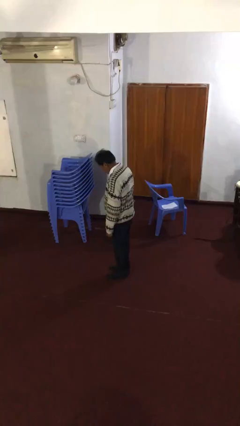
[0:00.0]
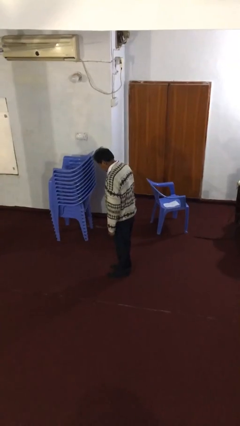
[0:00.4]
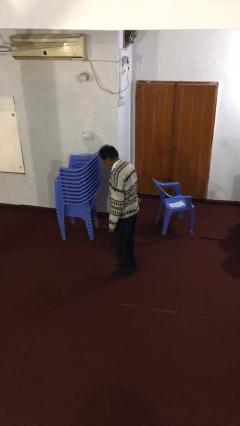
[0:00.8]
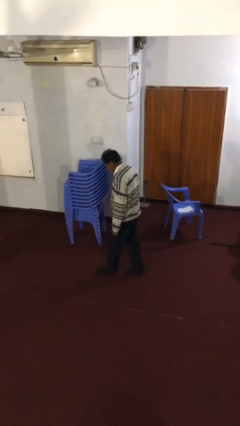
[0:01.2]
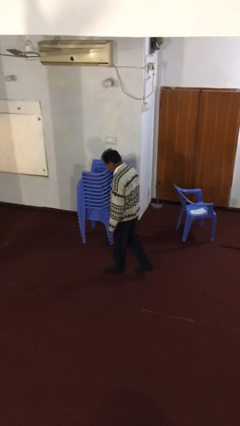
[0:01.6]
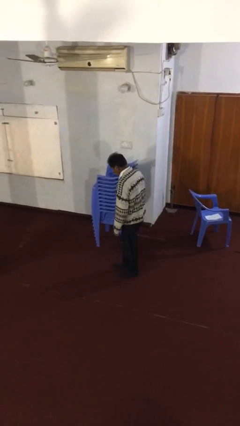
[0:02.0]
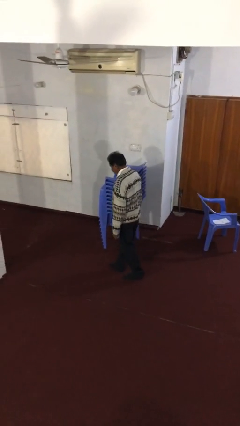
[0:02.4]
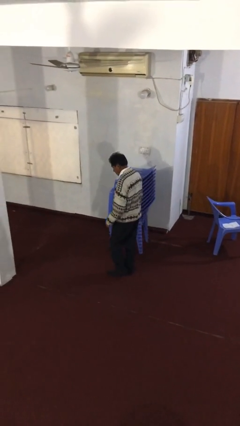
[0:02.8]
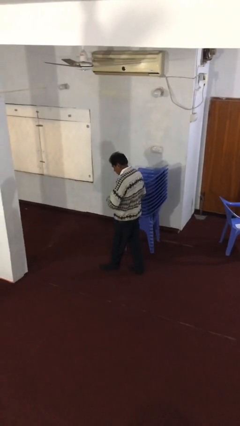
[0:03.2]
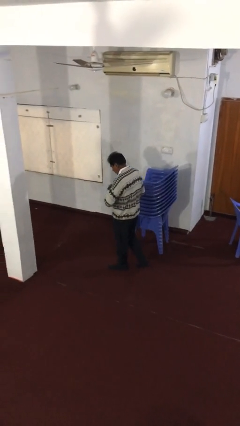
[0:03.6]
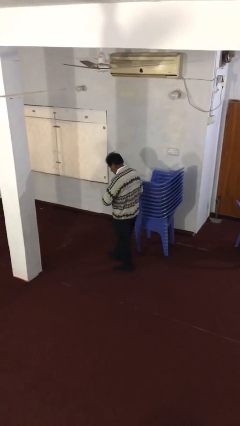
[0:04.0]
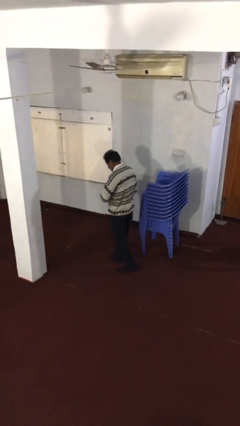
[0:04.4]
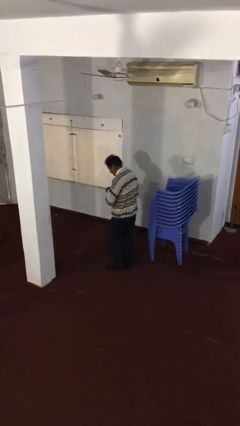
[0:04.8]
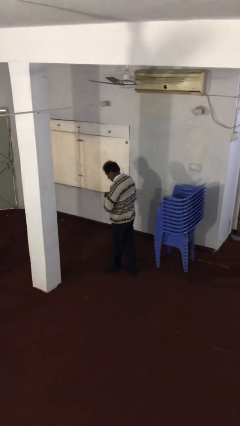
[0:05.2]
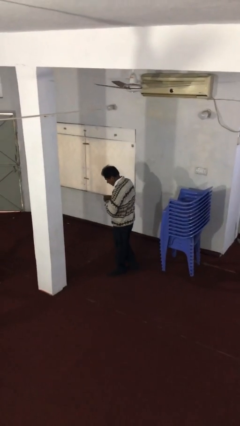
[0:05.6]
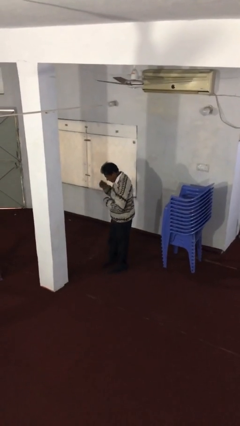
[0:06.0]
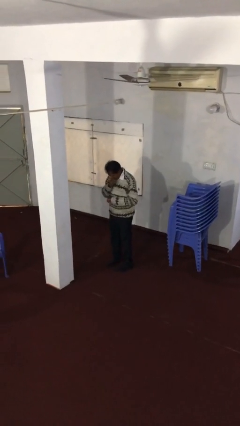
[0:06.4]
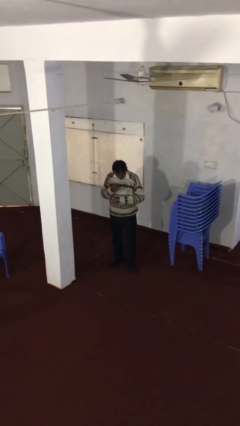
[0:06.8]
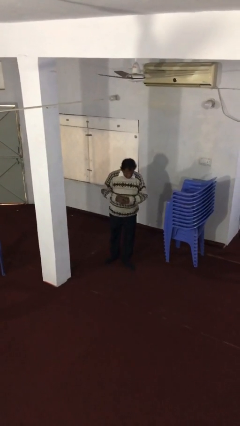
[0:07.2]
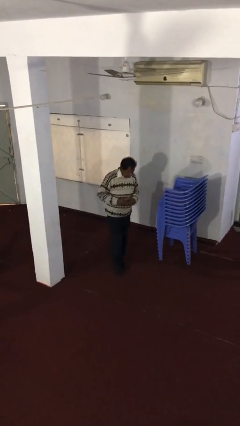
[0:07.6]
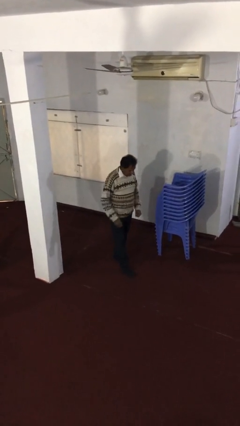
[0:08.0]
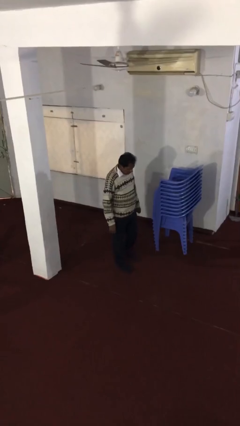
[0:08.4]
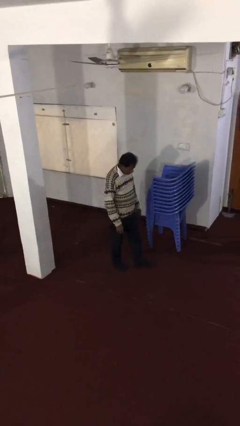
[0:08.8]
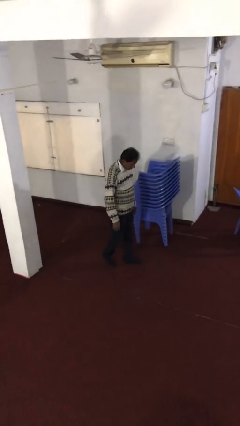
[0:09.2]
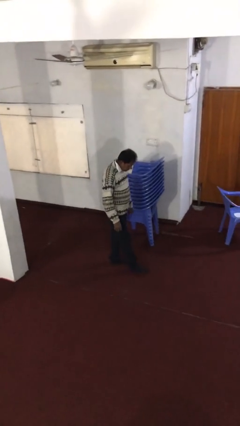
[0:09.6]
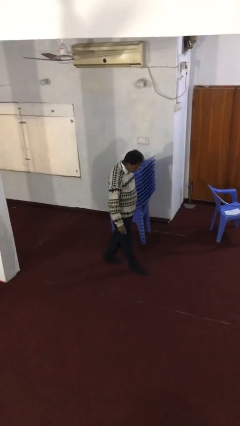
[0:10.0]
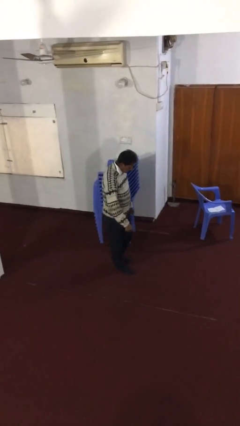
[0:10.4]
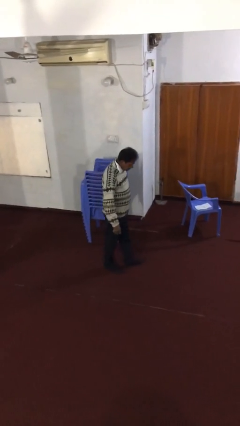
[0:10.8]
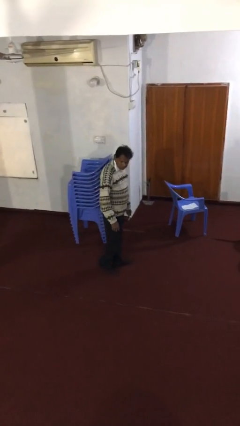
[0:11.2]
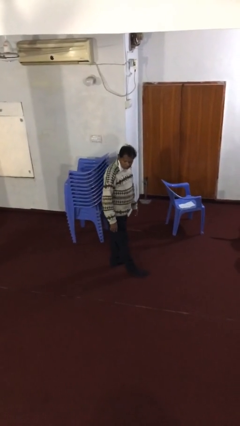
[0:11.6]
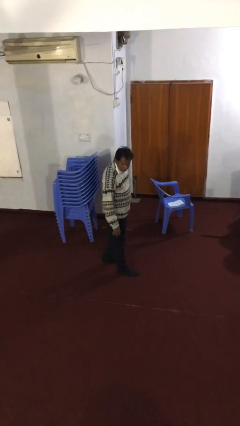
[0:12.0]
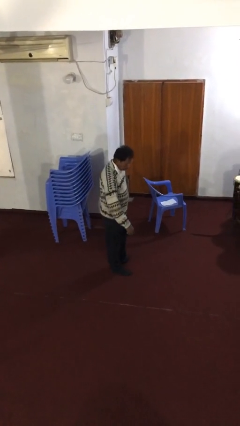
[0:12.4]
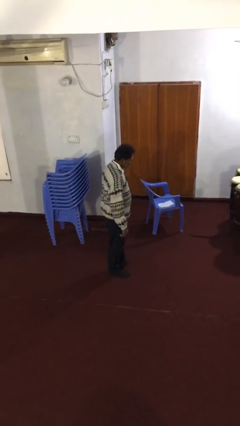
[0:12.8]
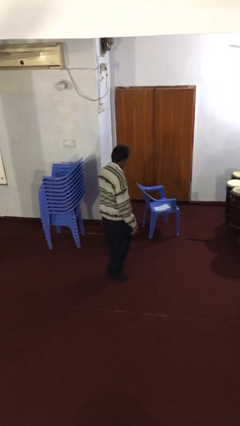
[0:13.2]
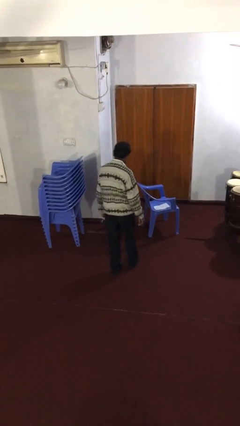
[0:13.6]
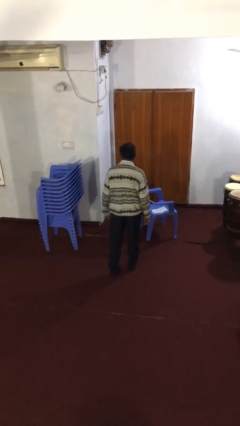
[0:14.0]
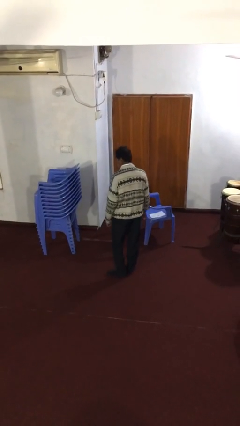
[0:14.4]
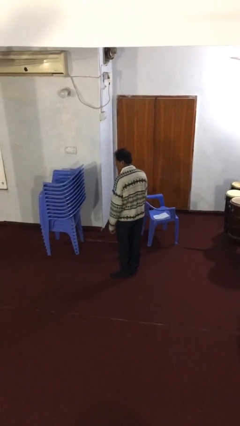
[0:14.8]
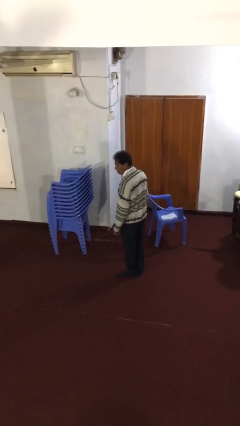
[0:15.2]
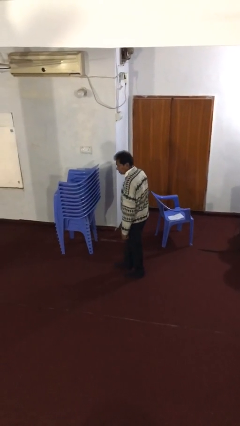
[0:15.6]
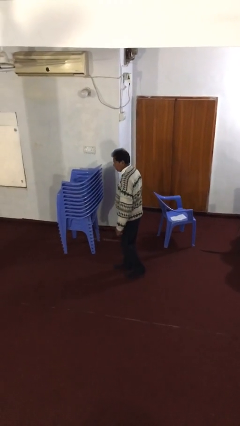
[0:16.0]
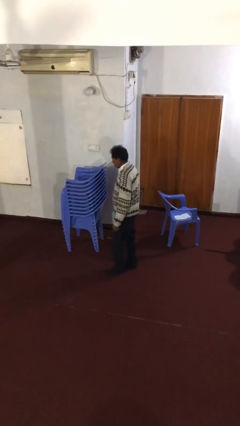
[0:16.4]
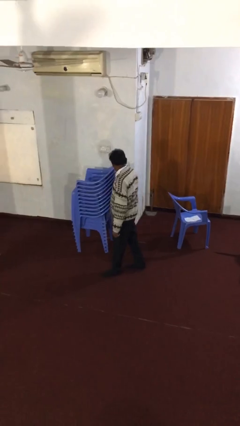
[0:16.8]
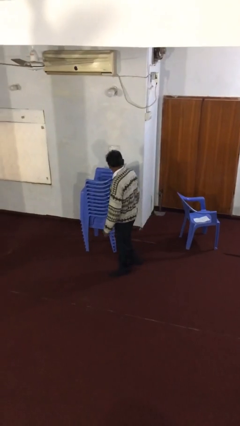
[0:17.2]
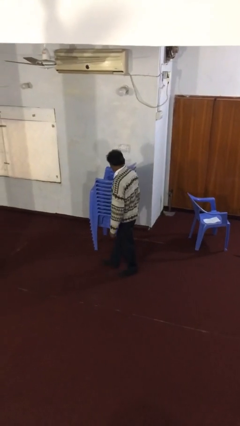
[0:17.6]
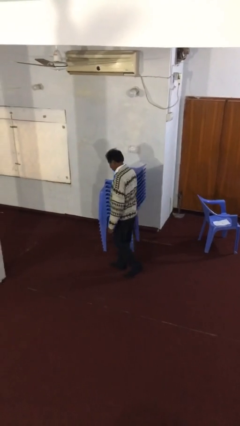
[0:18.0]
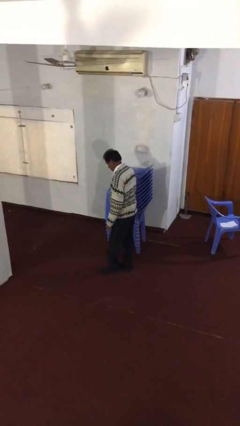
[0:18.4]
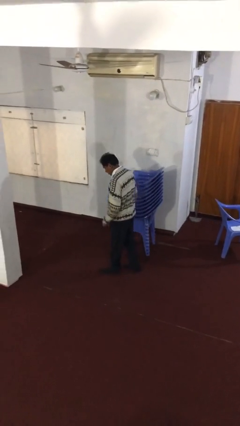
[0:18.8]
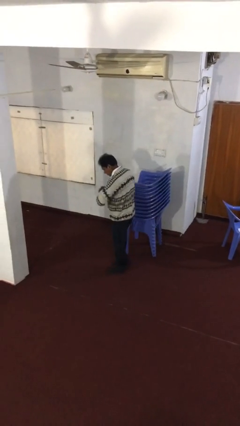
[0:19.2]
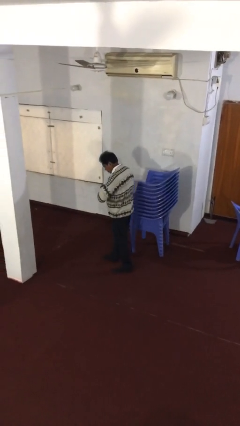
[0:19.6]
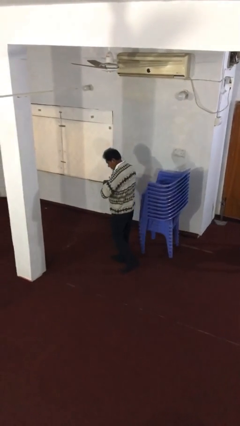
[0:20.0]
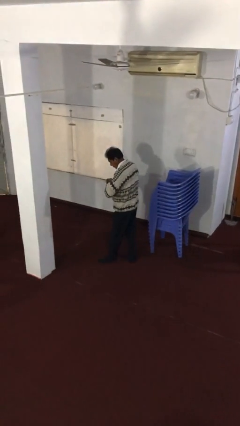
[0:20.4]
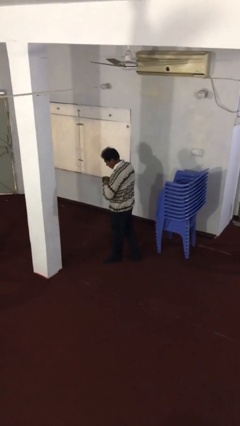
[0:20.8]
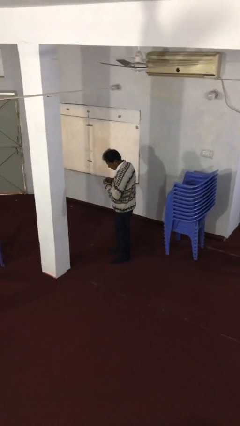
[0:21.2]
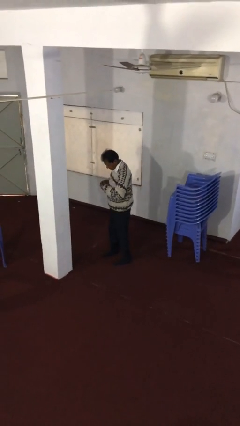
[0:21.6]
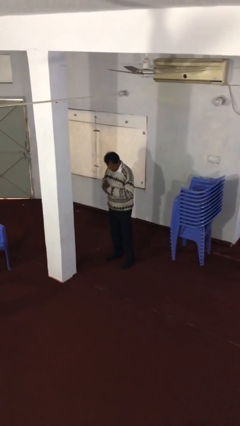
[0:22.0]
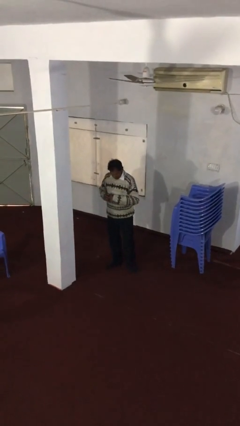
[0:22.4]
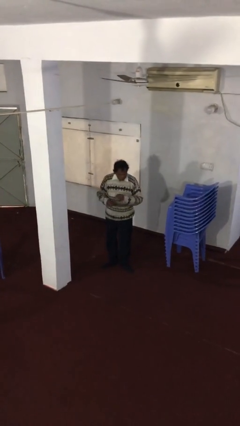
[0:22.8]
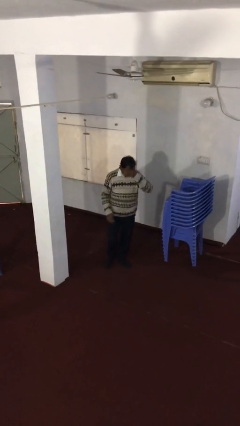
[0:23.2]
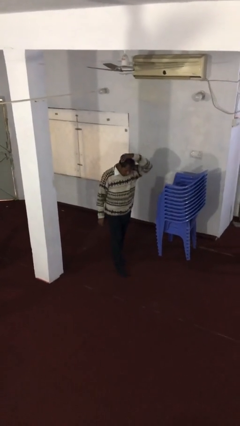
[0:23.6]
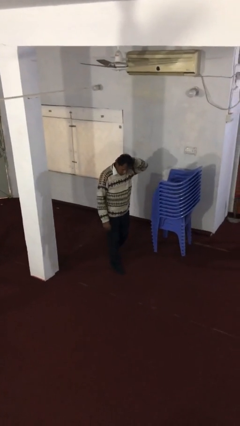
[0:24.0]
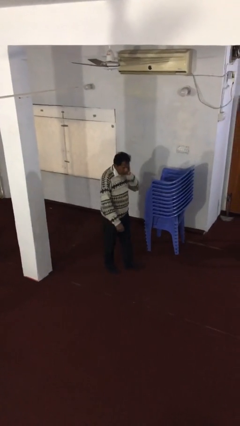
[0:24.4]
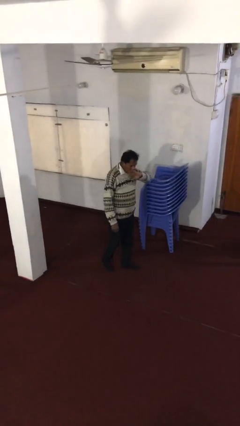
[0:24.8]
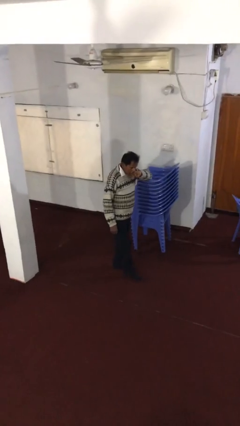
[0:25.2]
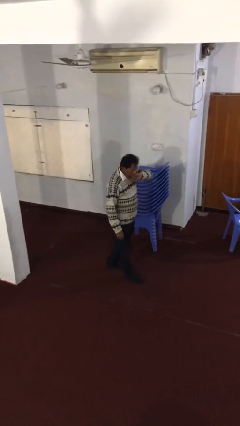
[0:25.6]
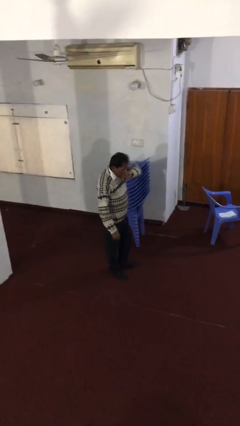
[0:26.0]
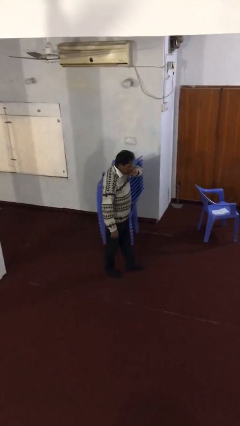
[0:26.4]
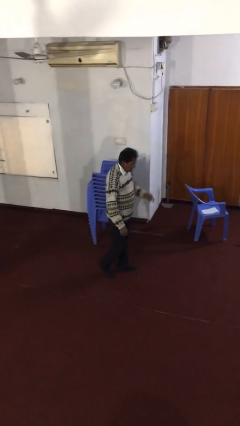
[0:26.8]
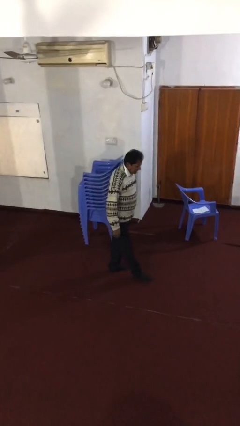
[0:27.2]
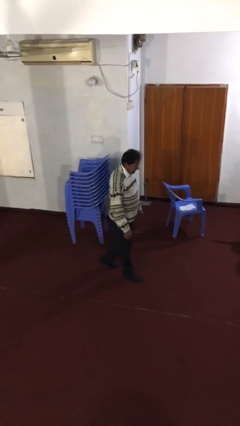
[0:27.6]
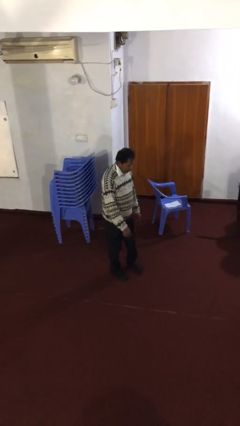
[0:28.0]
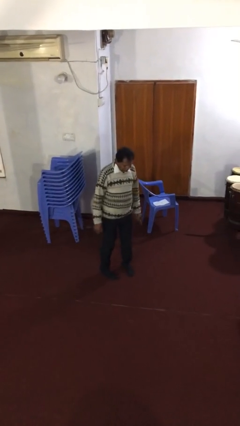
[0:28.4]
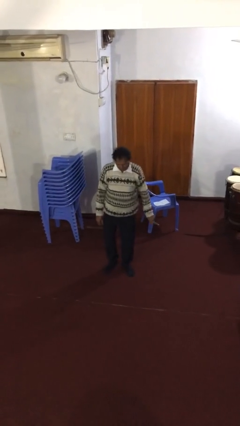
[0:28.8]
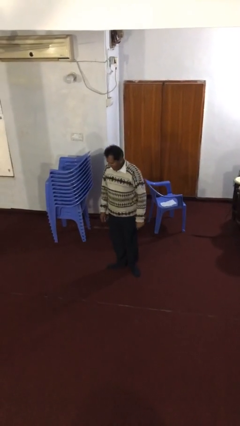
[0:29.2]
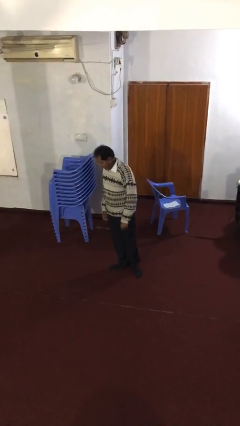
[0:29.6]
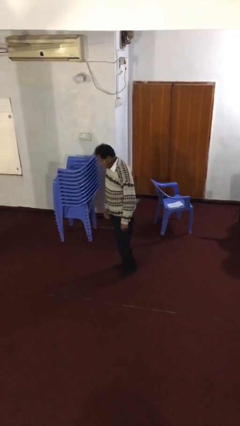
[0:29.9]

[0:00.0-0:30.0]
person walks

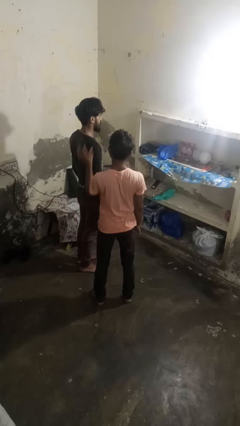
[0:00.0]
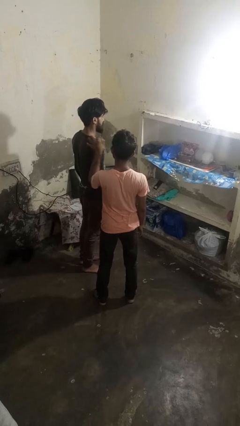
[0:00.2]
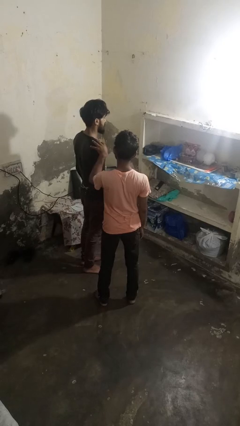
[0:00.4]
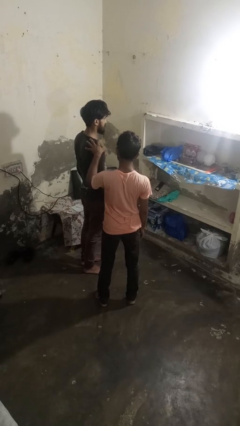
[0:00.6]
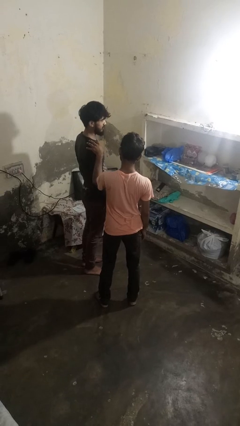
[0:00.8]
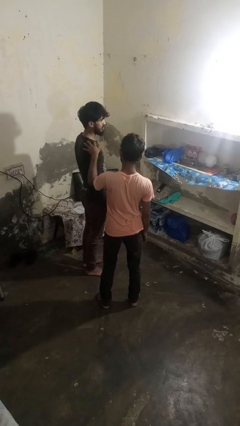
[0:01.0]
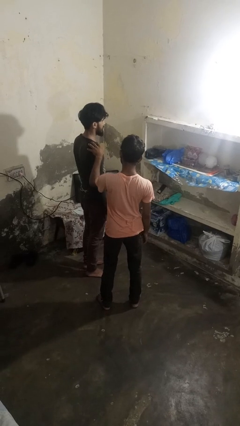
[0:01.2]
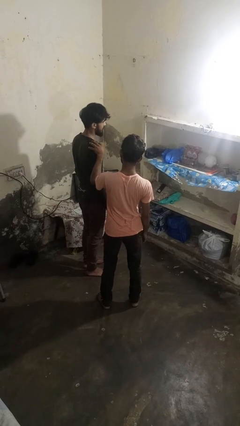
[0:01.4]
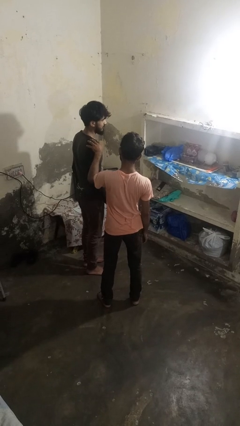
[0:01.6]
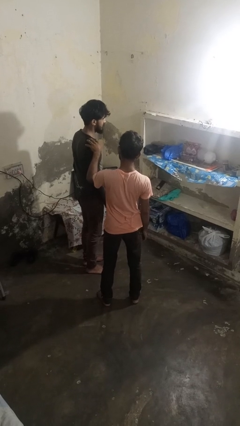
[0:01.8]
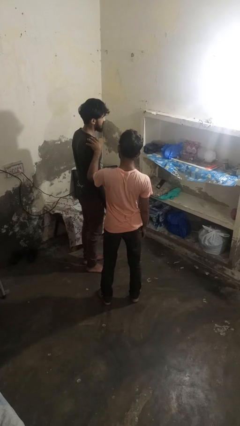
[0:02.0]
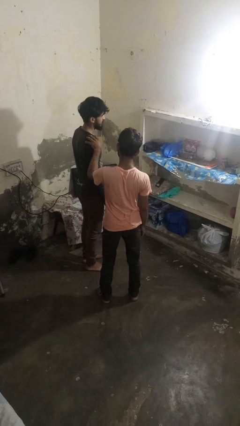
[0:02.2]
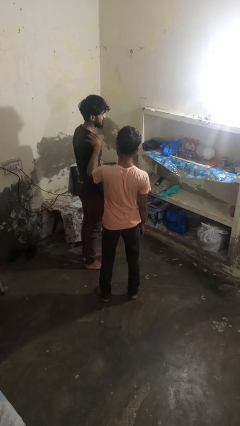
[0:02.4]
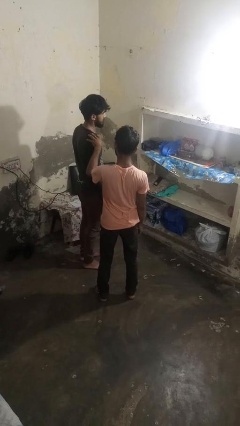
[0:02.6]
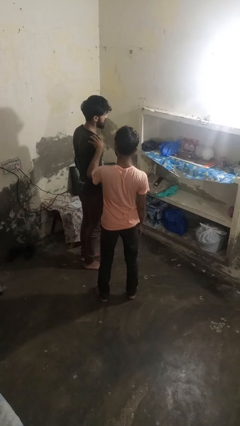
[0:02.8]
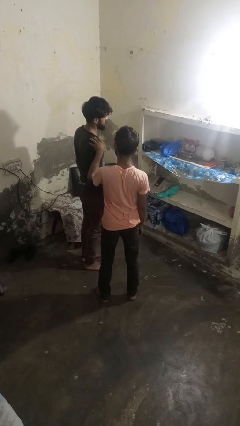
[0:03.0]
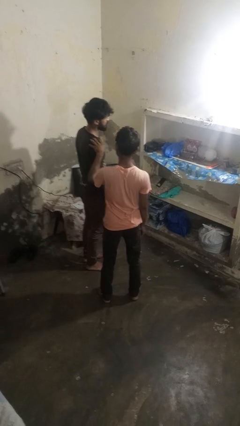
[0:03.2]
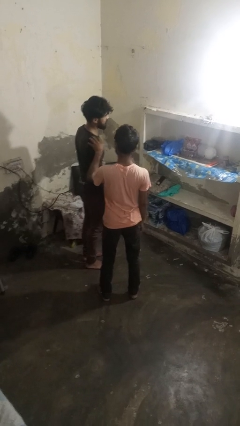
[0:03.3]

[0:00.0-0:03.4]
person grabs person by shoulder
